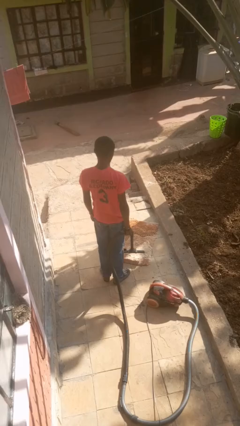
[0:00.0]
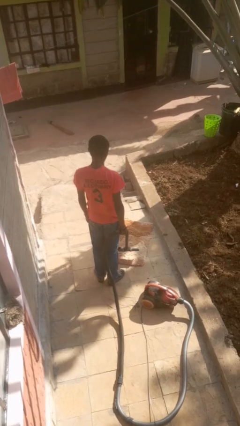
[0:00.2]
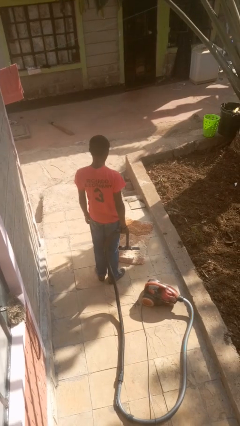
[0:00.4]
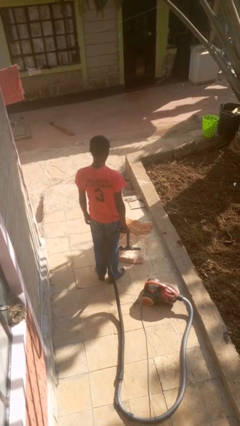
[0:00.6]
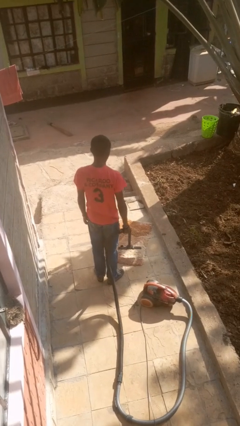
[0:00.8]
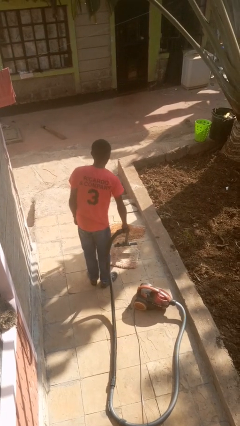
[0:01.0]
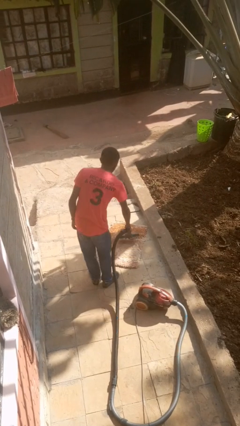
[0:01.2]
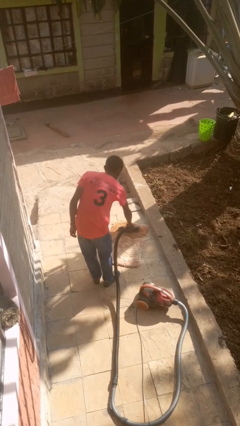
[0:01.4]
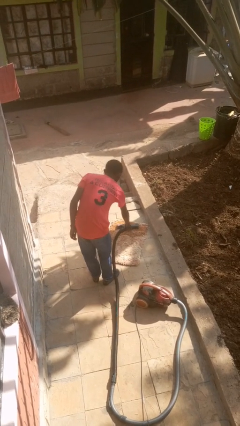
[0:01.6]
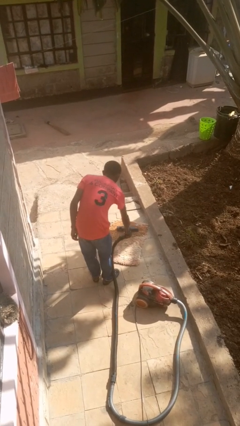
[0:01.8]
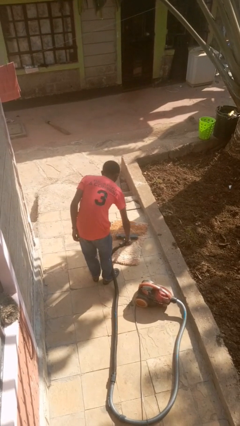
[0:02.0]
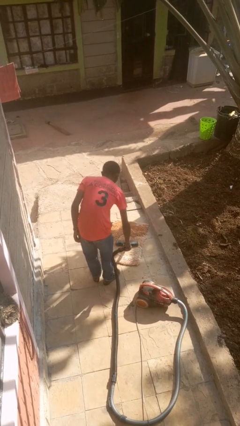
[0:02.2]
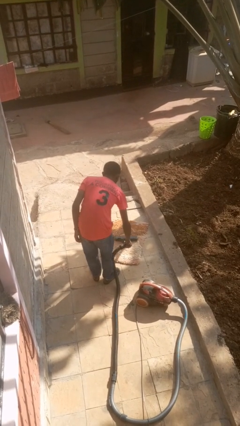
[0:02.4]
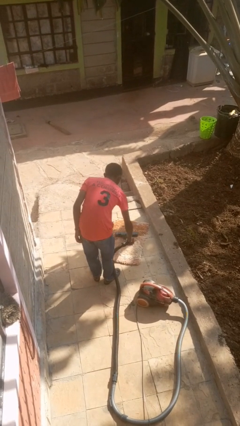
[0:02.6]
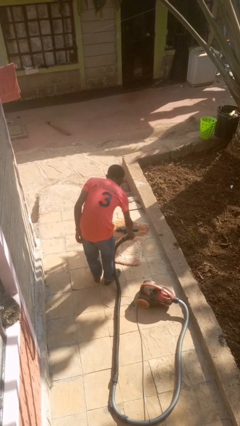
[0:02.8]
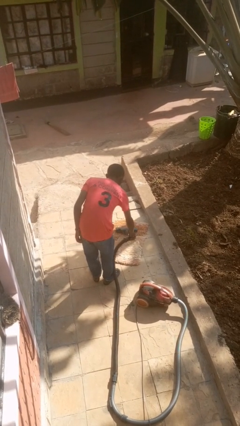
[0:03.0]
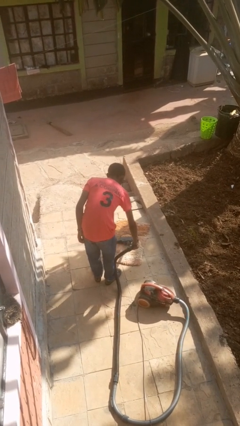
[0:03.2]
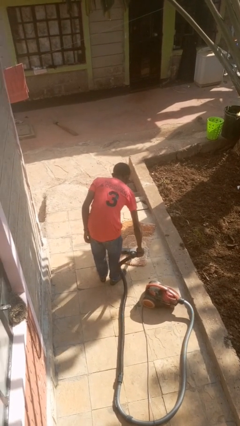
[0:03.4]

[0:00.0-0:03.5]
person vacuums carpet

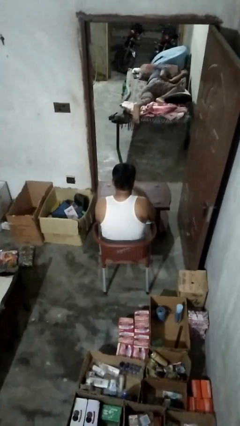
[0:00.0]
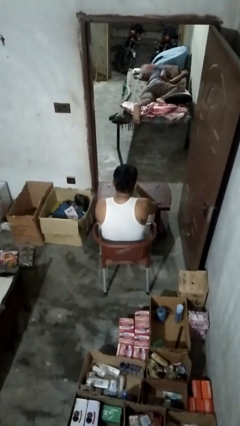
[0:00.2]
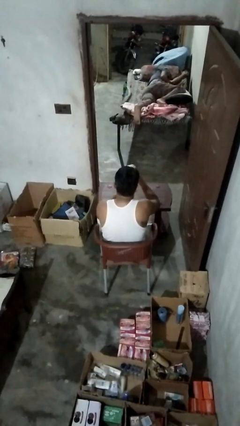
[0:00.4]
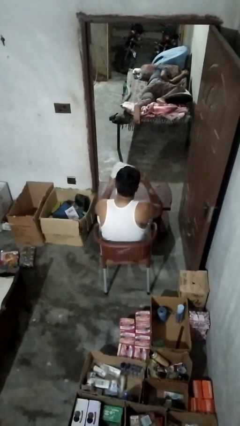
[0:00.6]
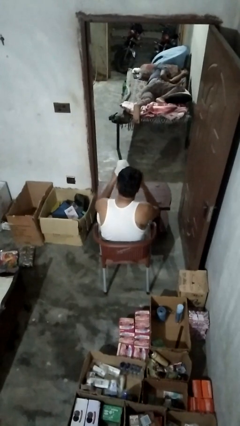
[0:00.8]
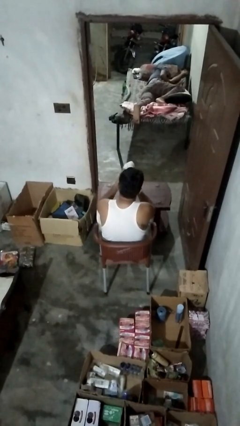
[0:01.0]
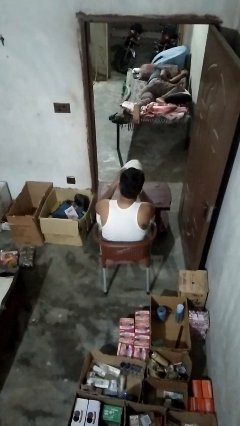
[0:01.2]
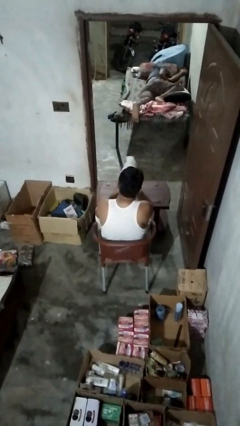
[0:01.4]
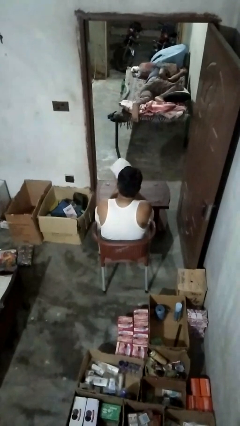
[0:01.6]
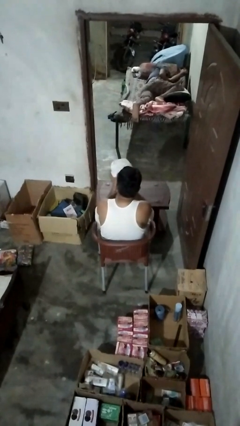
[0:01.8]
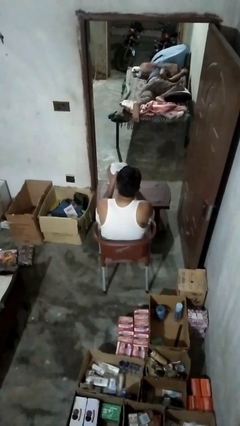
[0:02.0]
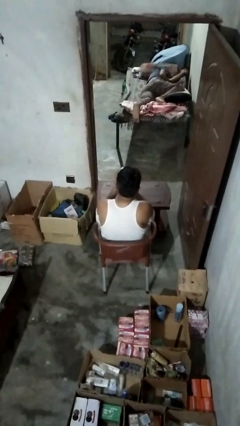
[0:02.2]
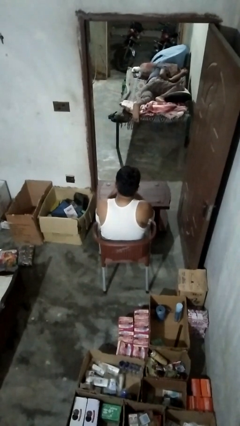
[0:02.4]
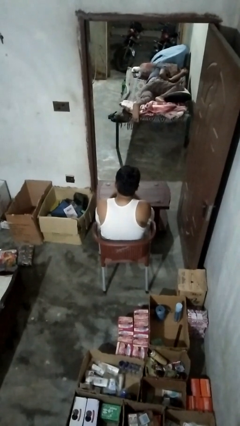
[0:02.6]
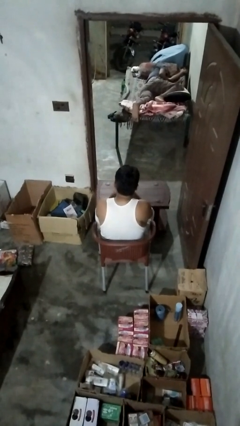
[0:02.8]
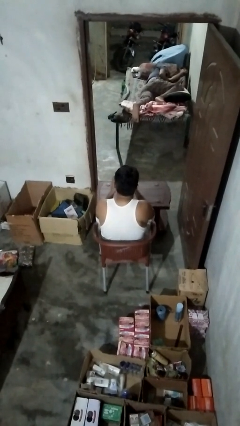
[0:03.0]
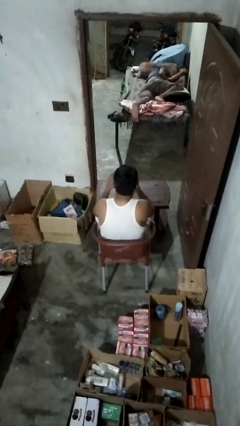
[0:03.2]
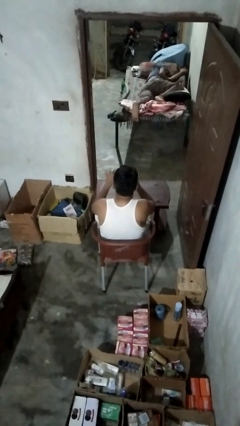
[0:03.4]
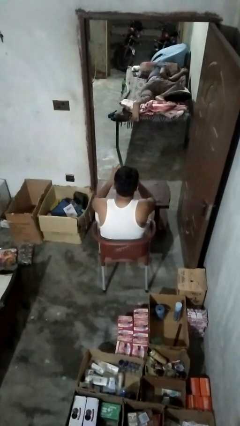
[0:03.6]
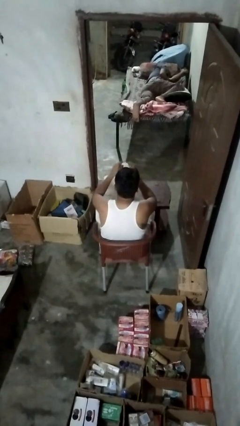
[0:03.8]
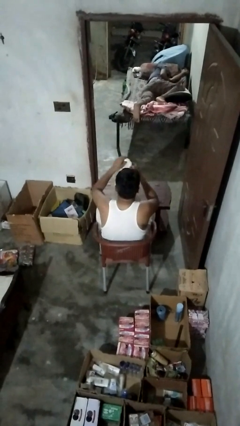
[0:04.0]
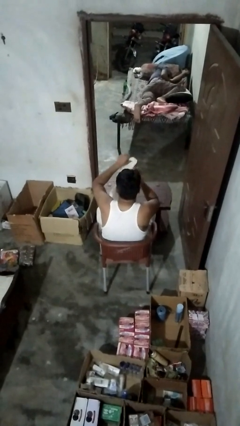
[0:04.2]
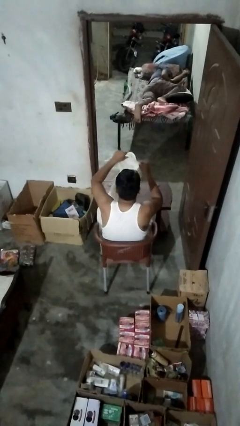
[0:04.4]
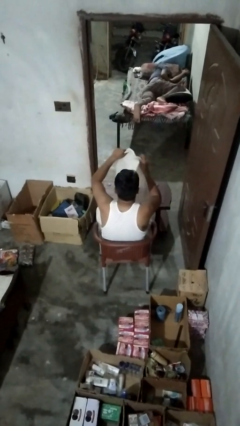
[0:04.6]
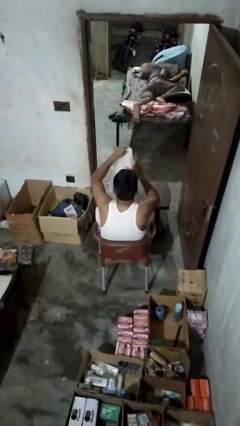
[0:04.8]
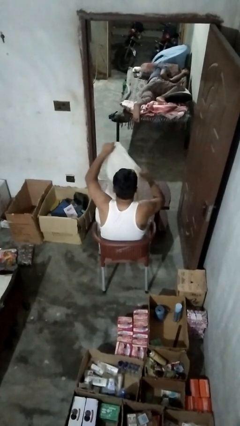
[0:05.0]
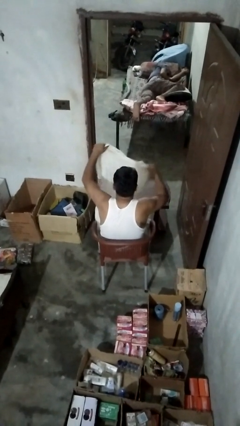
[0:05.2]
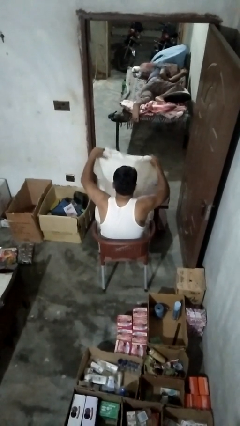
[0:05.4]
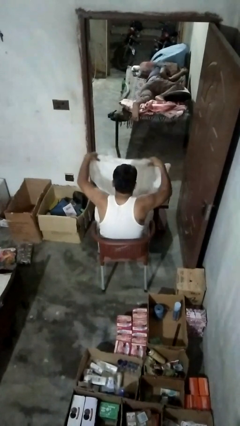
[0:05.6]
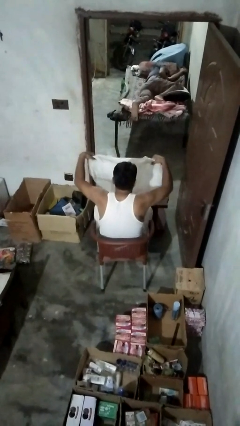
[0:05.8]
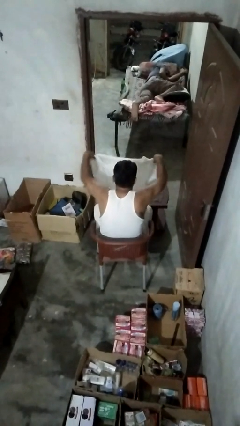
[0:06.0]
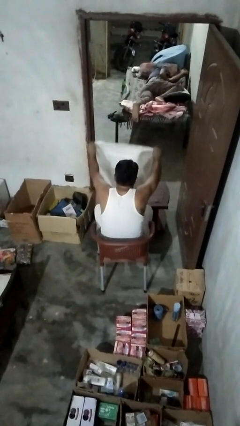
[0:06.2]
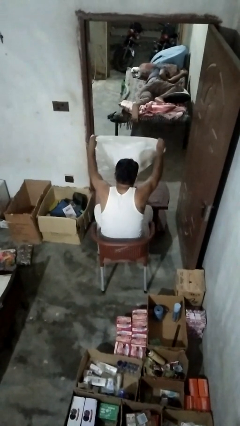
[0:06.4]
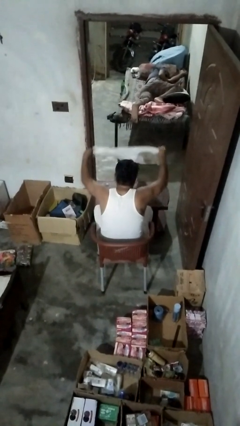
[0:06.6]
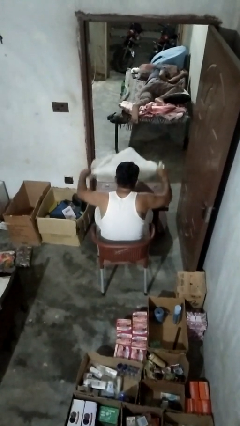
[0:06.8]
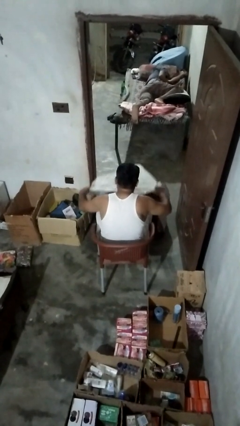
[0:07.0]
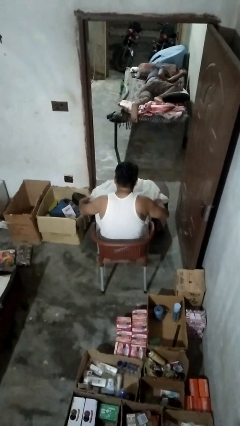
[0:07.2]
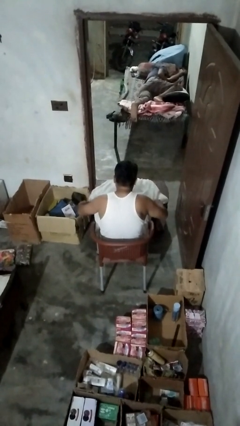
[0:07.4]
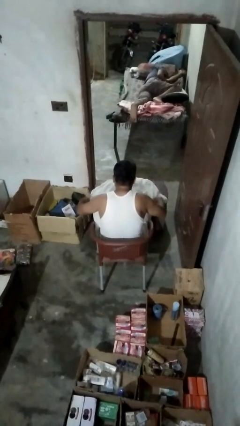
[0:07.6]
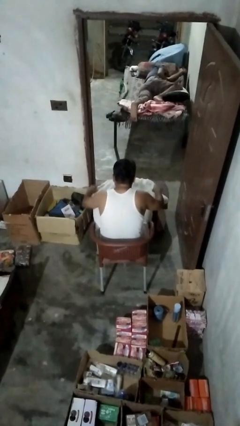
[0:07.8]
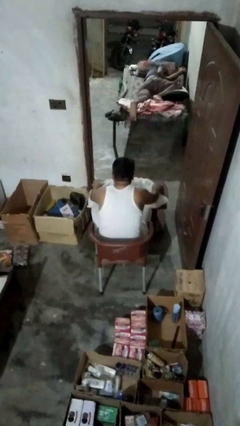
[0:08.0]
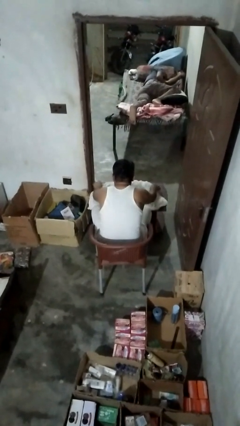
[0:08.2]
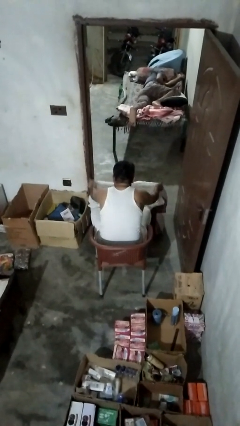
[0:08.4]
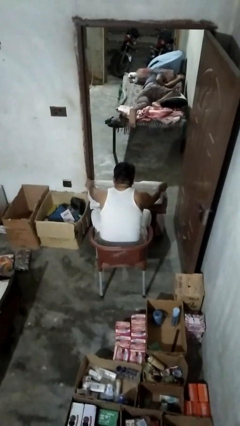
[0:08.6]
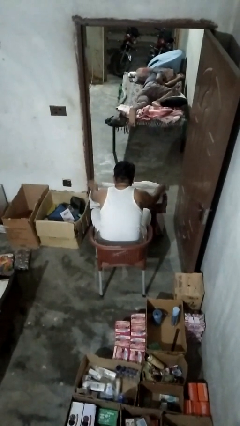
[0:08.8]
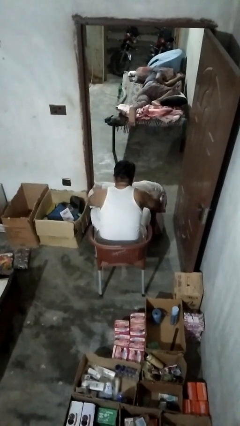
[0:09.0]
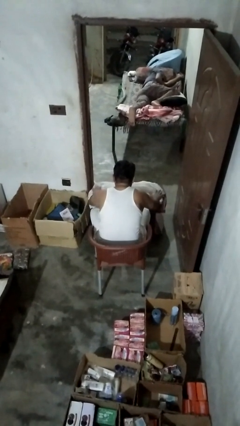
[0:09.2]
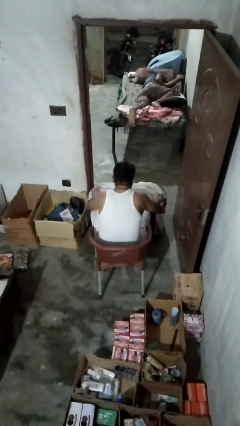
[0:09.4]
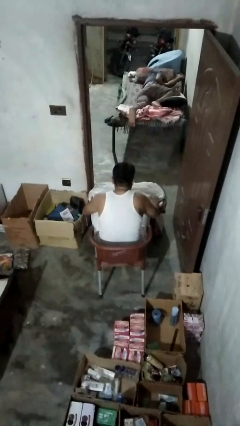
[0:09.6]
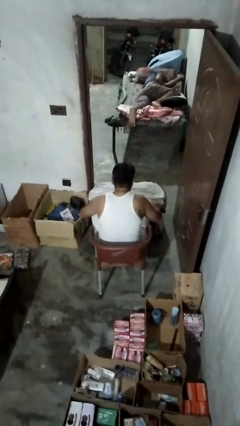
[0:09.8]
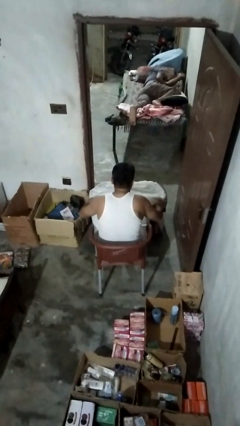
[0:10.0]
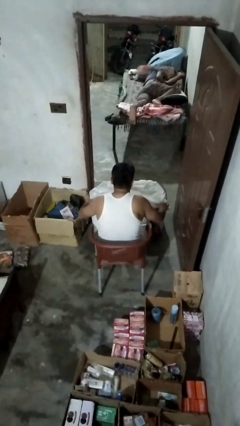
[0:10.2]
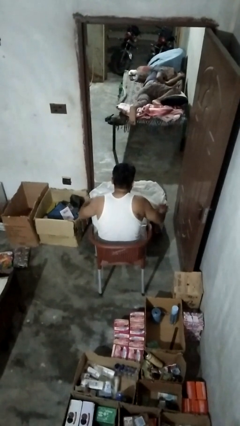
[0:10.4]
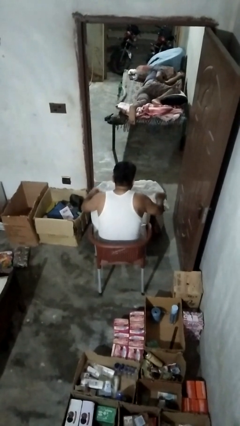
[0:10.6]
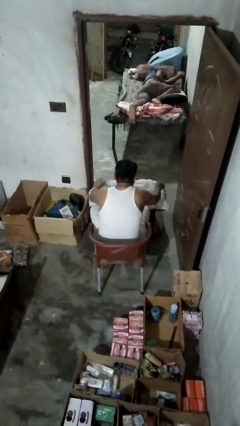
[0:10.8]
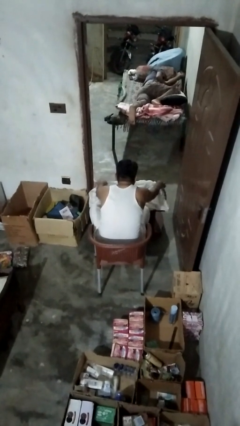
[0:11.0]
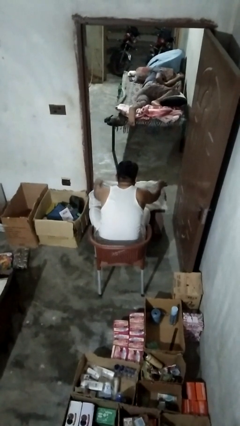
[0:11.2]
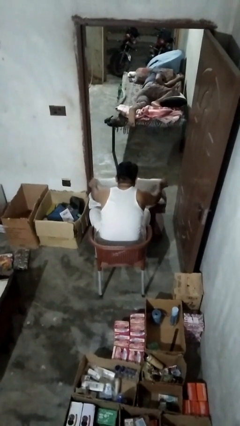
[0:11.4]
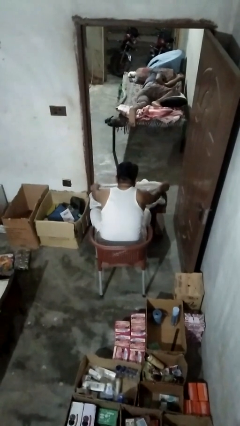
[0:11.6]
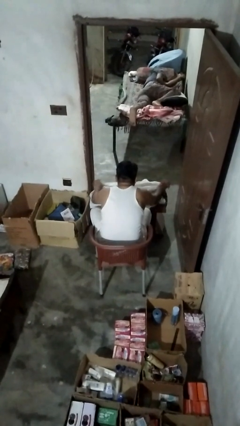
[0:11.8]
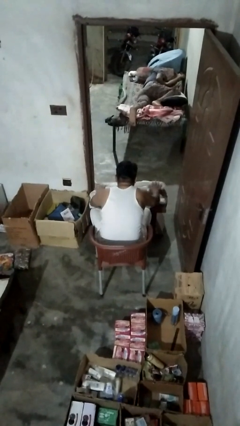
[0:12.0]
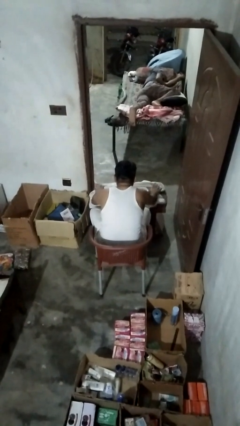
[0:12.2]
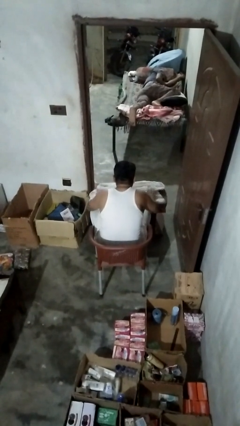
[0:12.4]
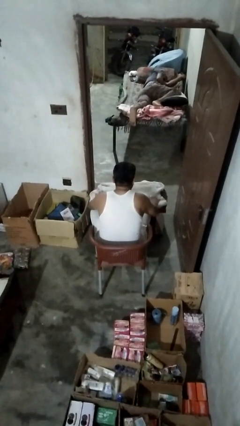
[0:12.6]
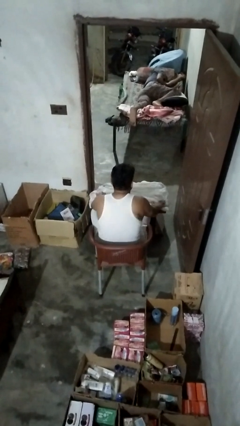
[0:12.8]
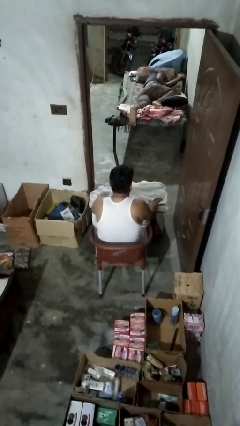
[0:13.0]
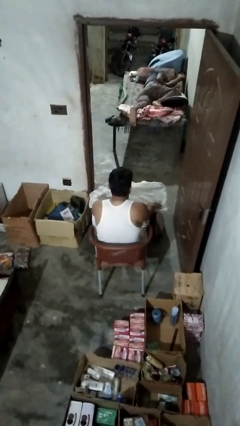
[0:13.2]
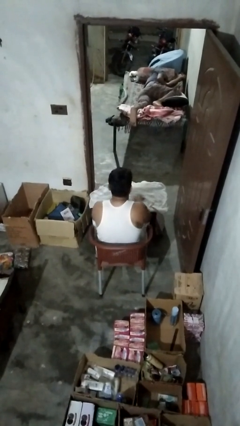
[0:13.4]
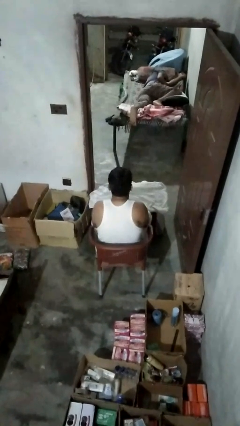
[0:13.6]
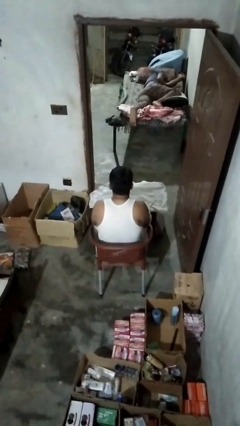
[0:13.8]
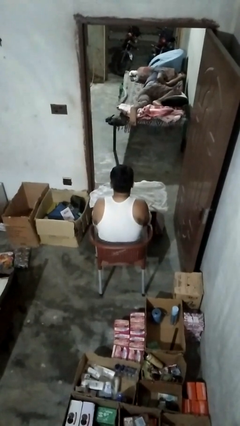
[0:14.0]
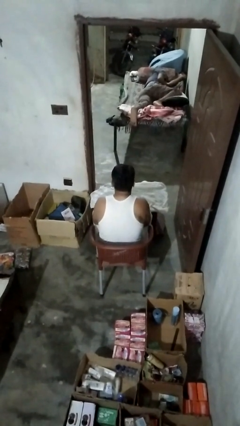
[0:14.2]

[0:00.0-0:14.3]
person spreads tablecloth

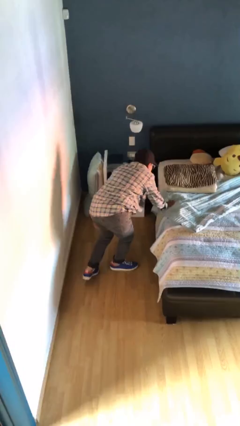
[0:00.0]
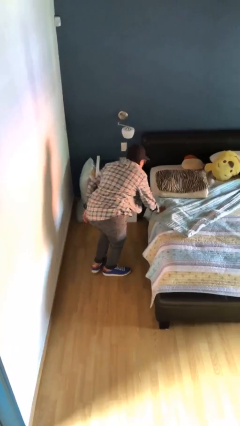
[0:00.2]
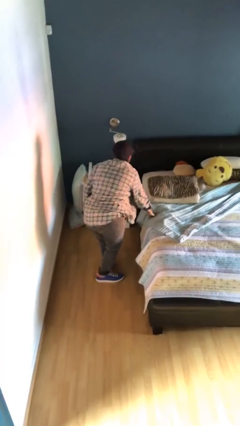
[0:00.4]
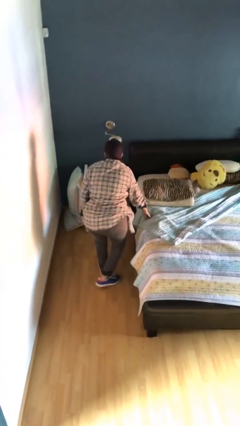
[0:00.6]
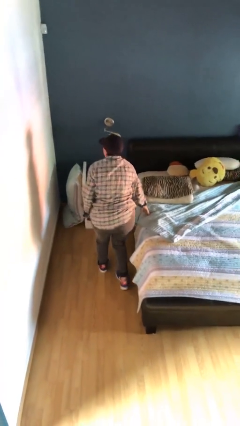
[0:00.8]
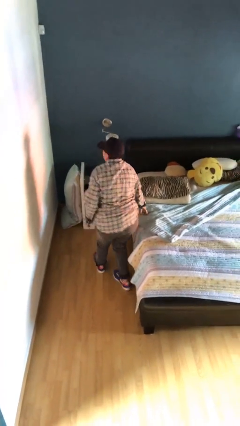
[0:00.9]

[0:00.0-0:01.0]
person stands up from floor
